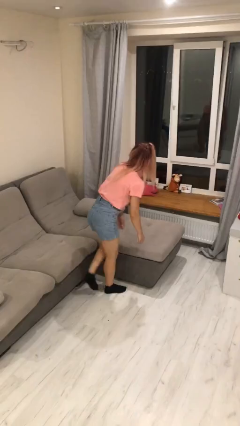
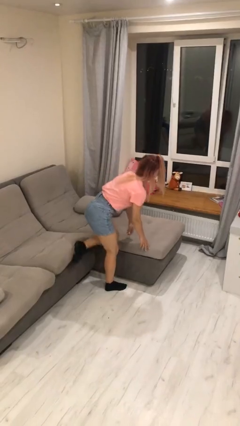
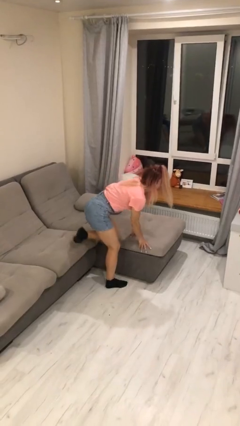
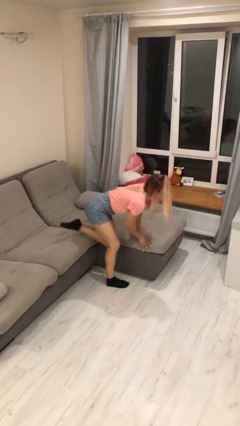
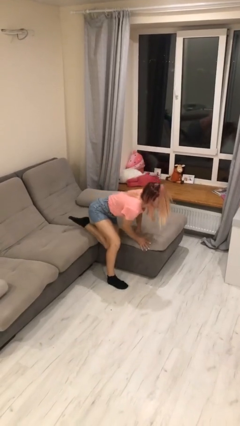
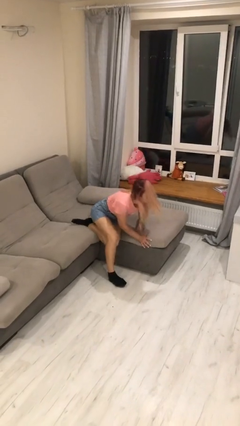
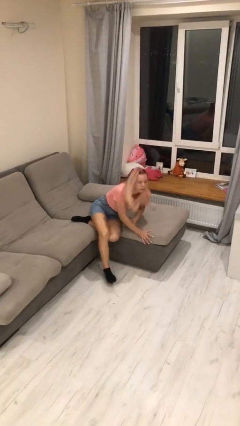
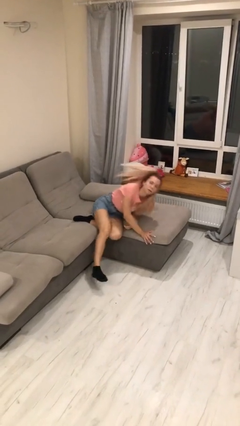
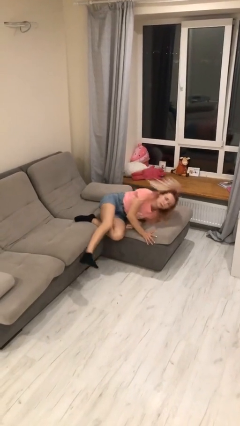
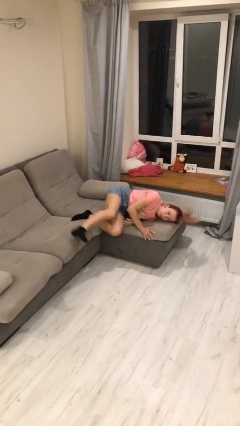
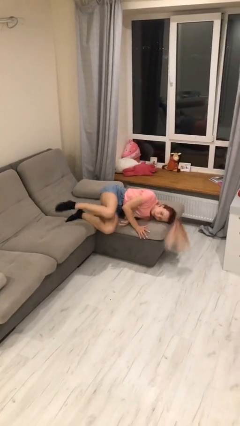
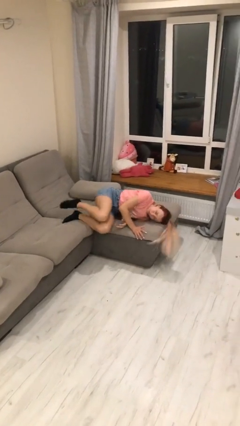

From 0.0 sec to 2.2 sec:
person lies down on bed

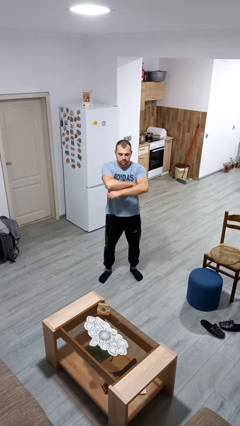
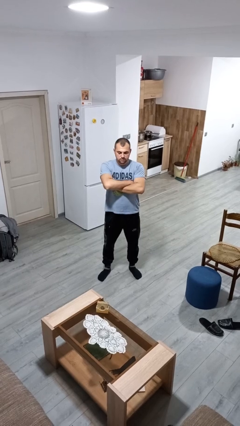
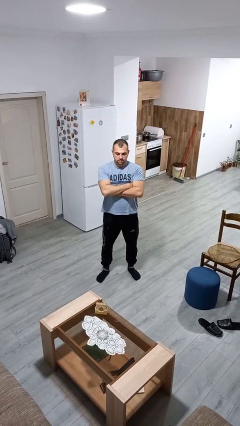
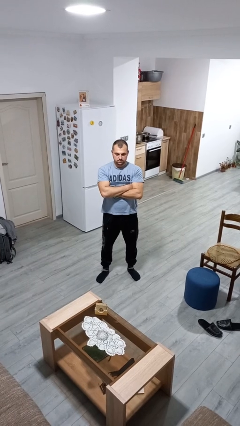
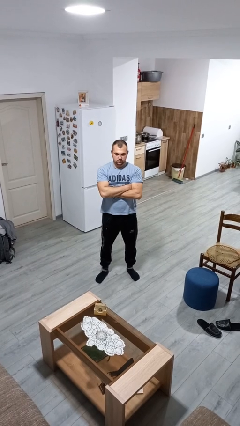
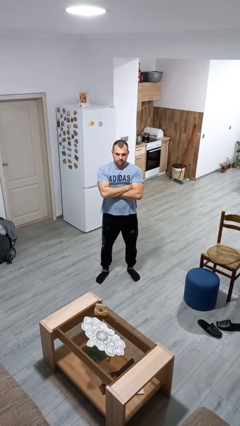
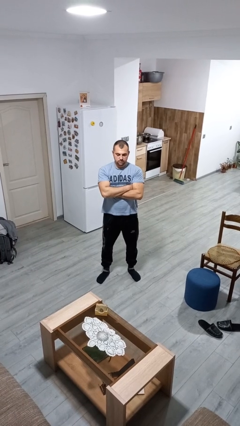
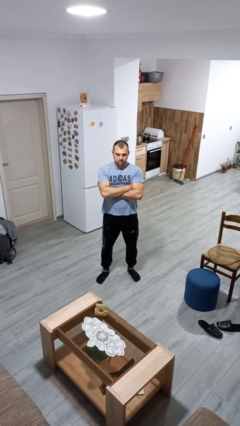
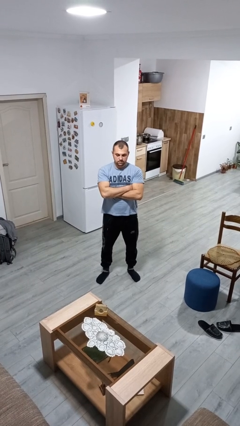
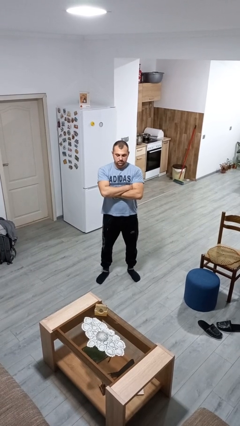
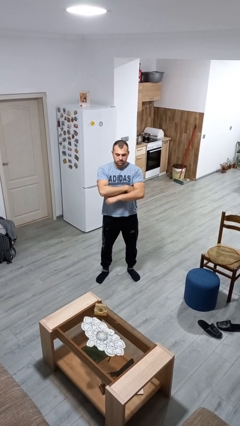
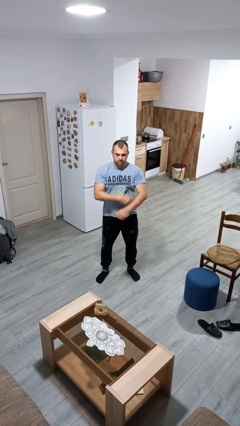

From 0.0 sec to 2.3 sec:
person crosses arms

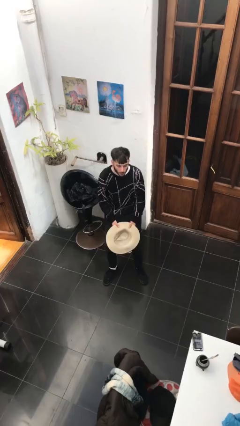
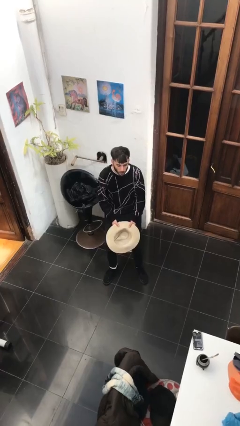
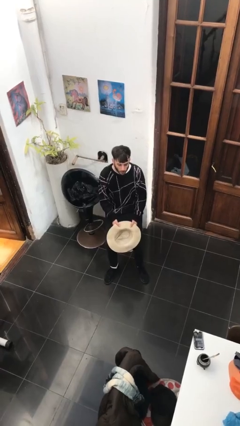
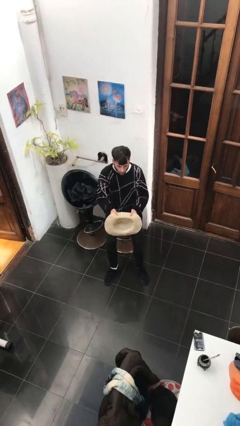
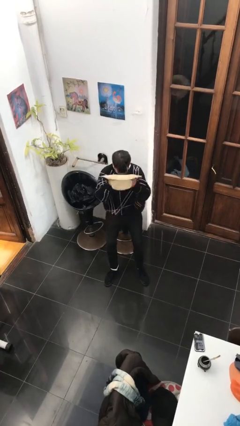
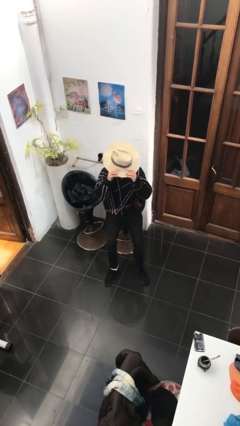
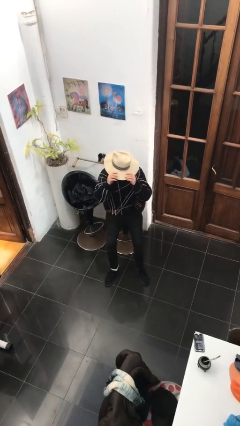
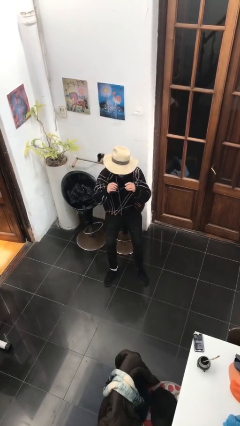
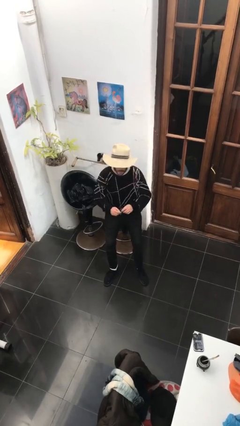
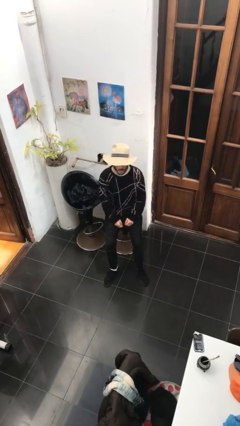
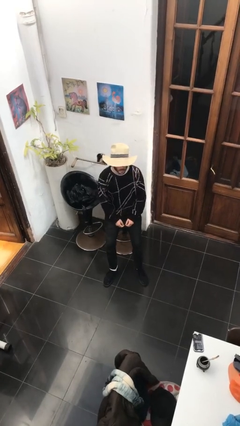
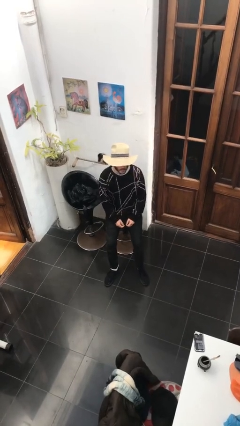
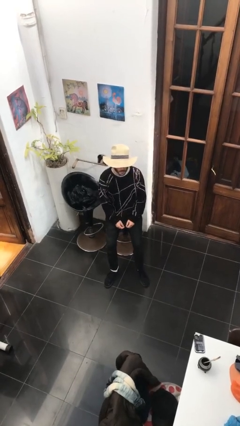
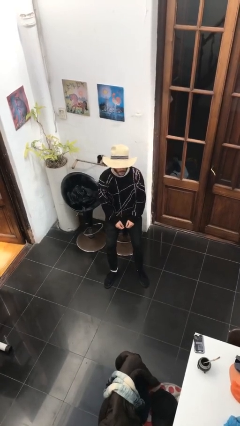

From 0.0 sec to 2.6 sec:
person puts on hat

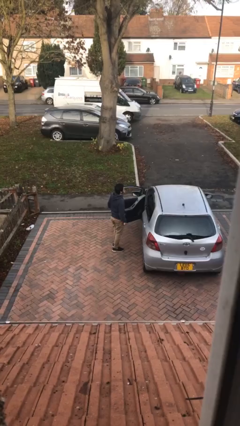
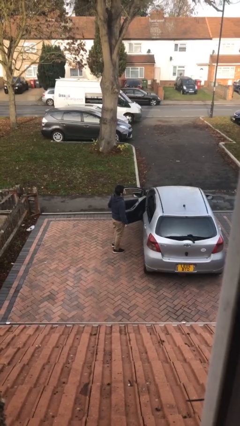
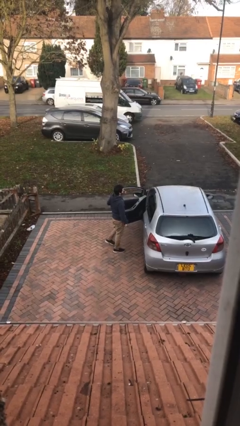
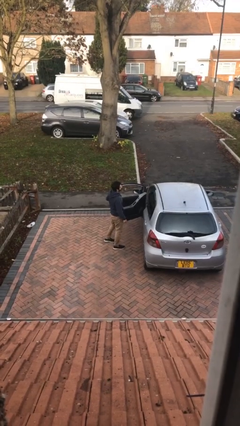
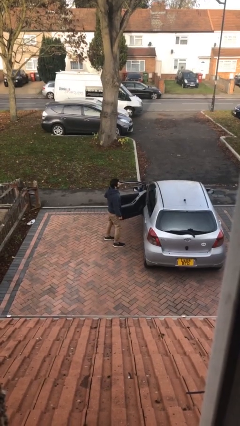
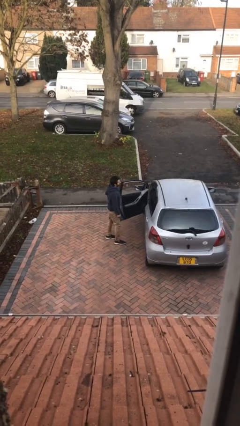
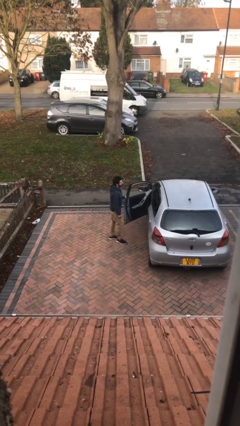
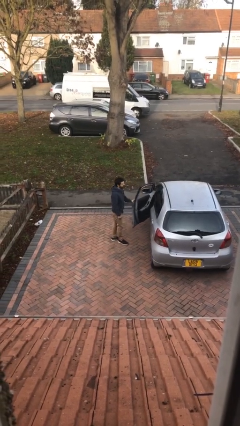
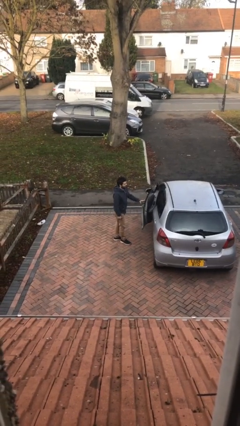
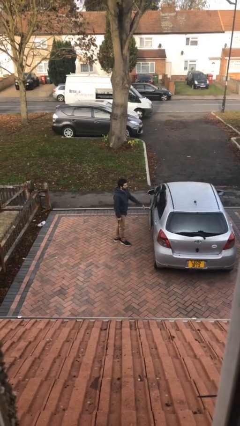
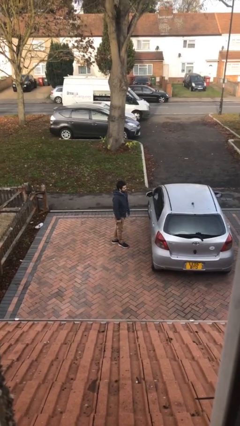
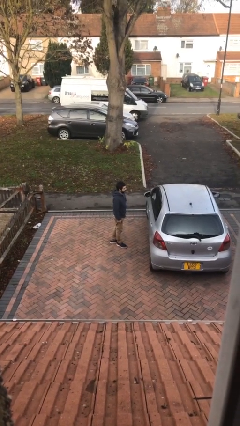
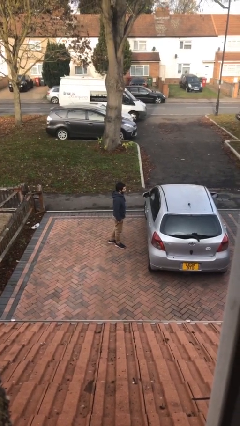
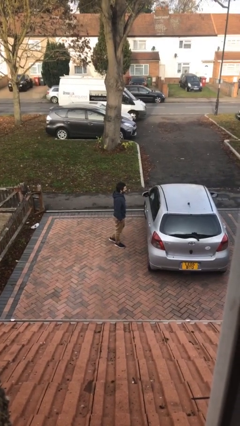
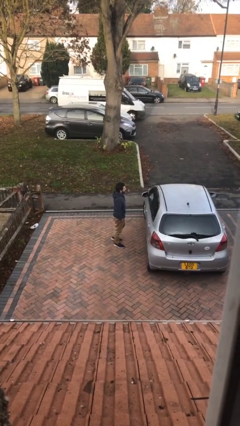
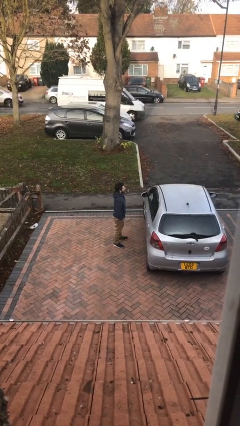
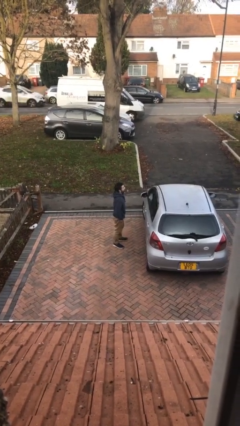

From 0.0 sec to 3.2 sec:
person closes car door

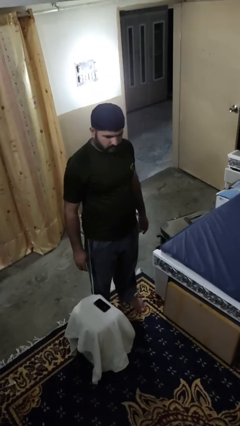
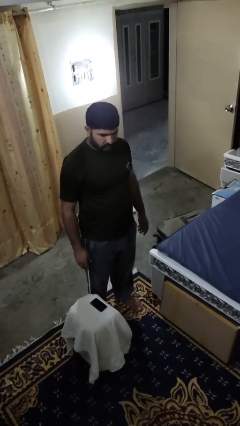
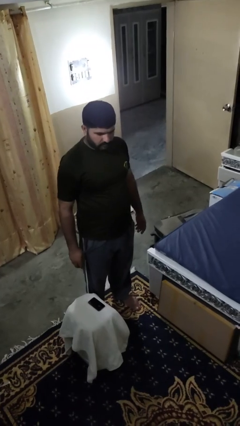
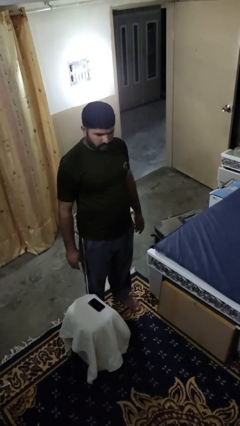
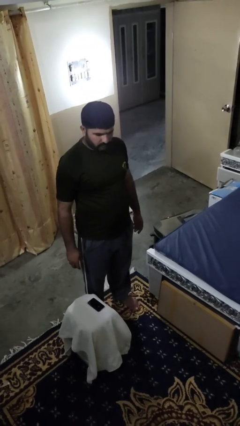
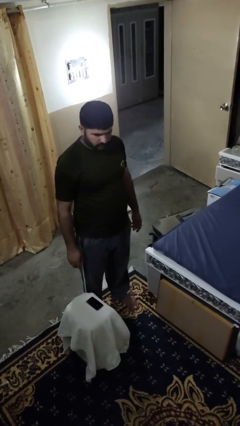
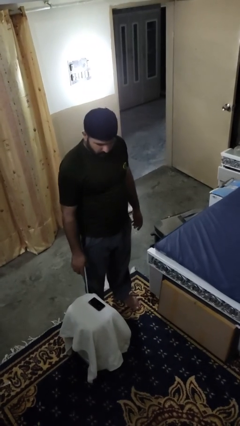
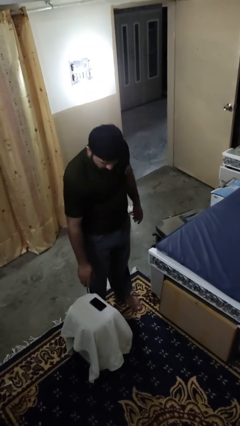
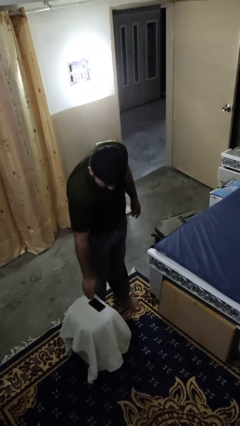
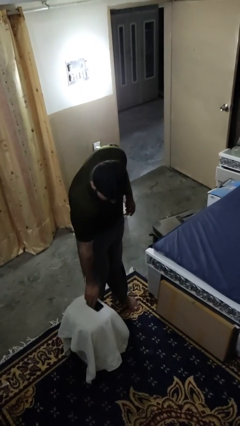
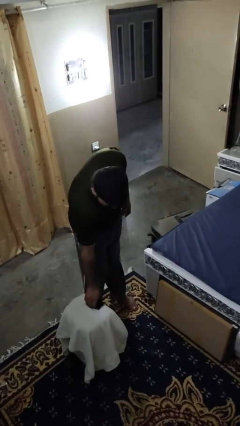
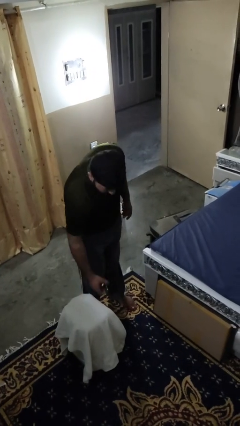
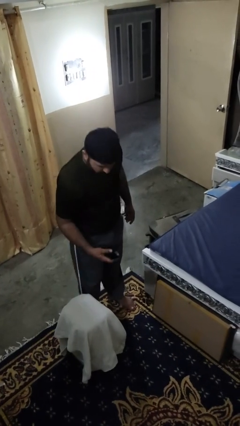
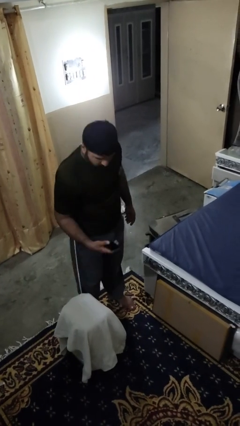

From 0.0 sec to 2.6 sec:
person takes phone from pocket

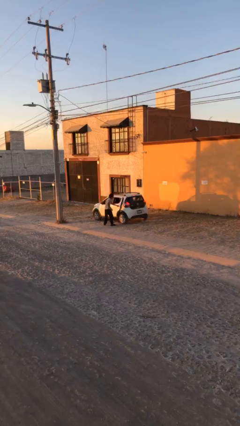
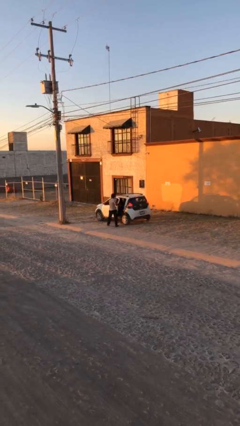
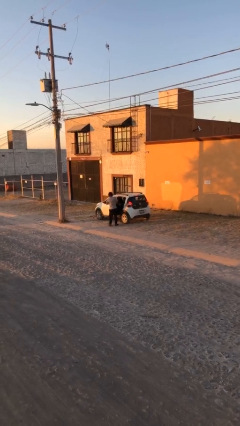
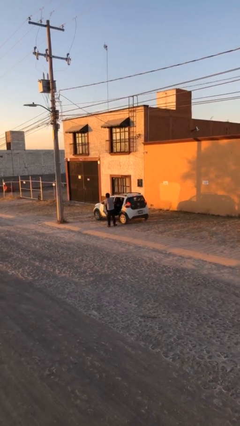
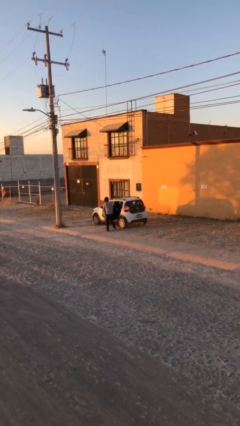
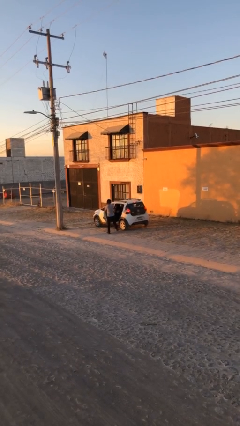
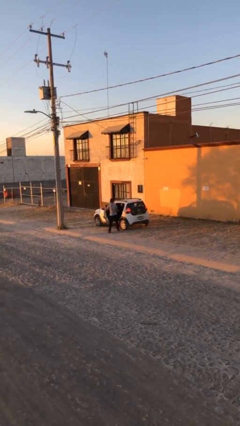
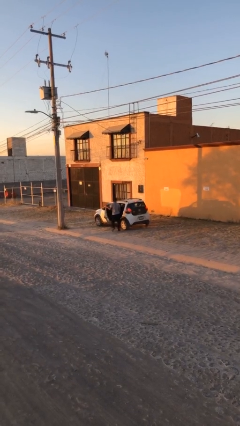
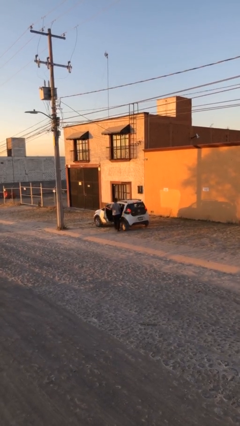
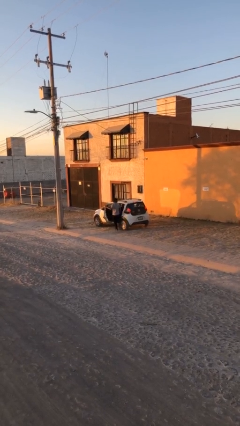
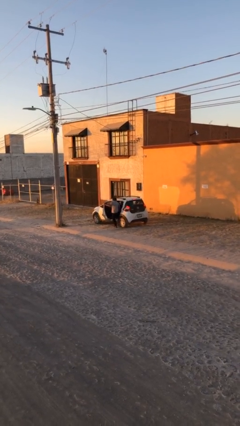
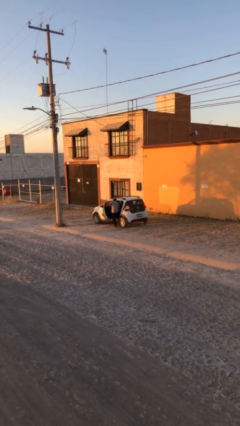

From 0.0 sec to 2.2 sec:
car picks up person

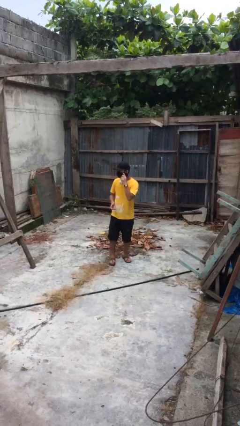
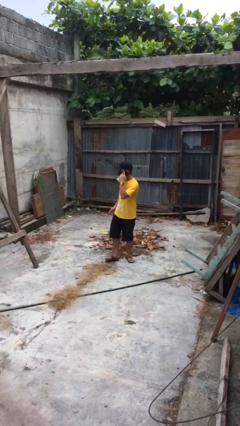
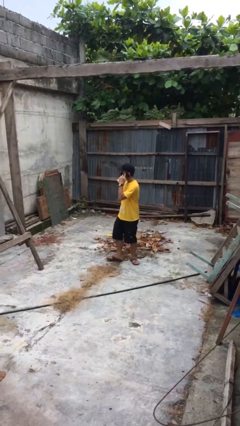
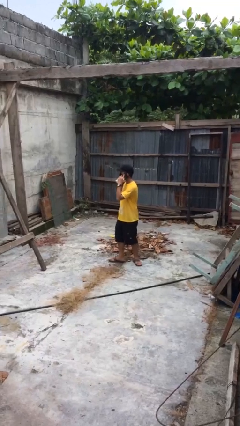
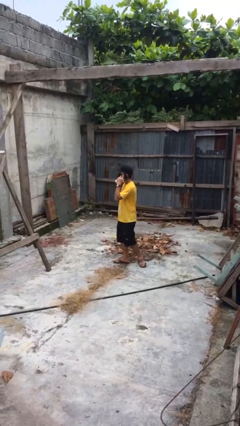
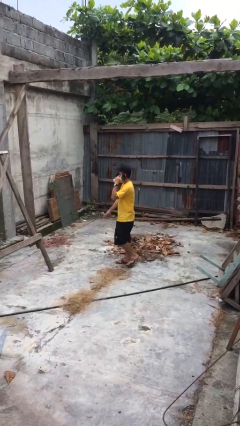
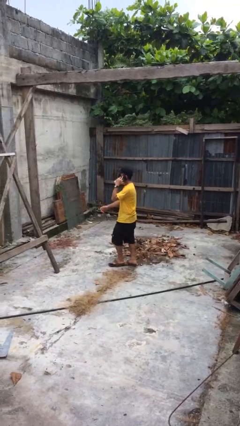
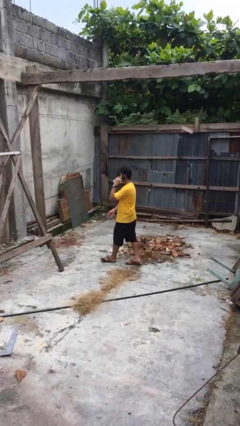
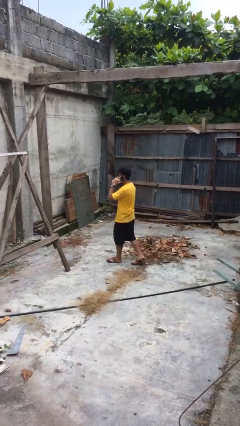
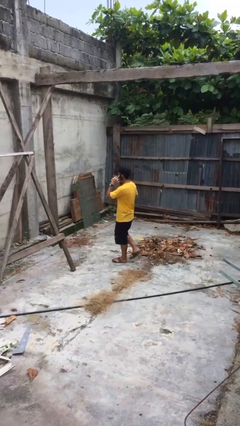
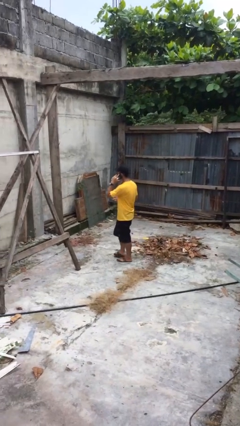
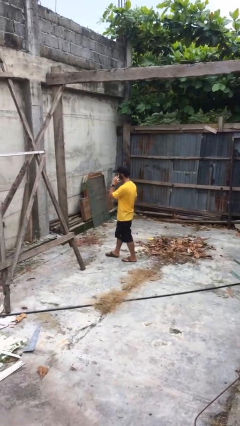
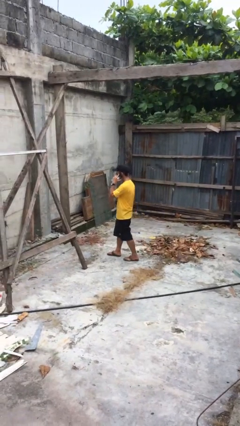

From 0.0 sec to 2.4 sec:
person talks on phone
